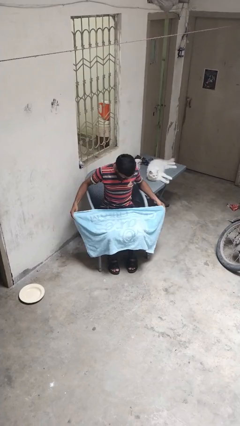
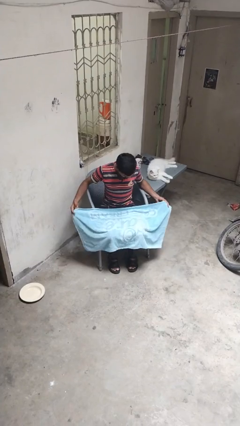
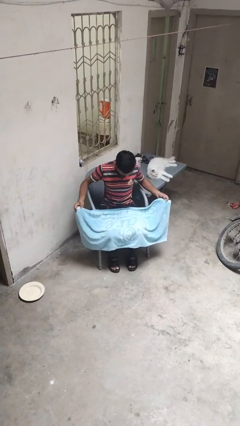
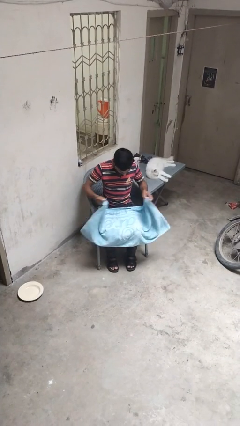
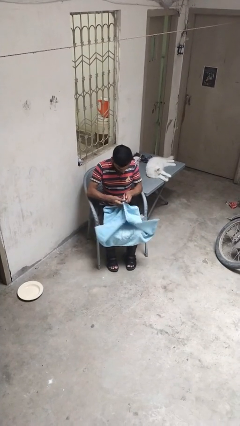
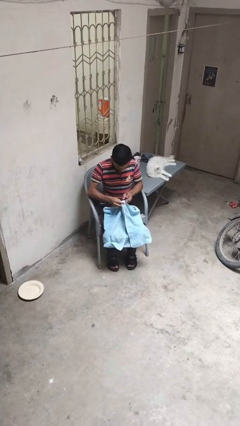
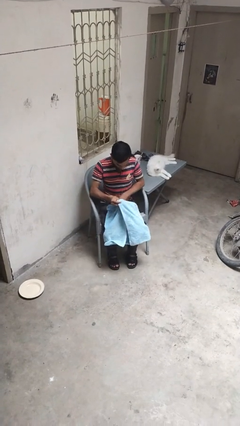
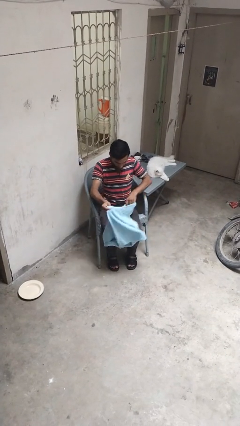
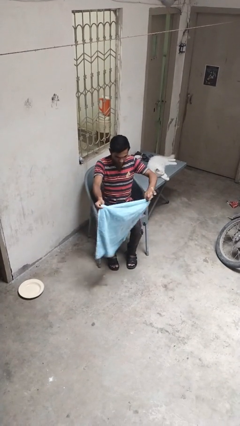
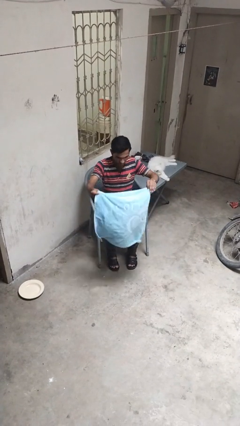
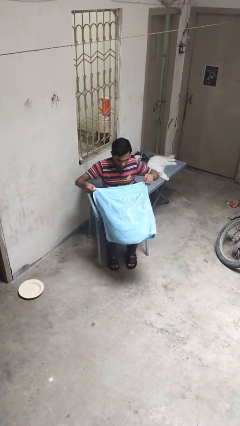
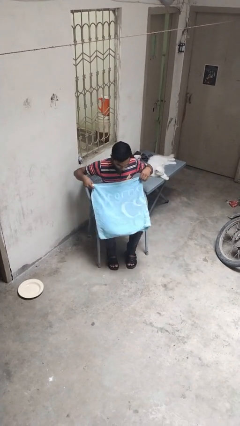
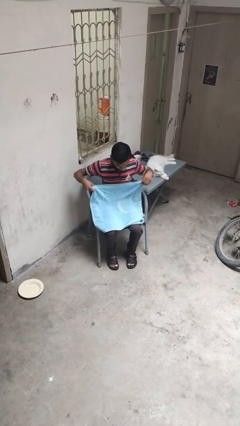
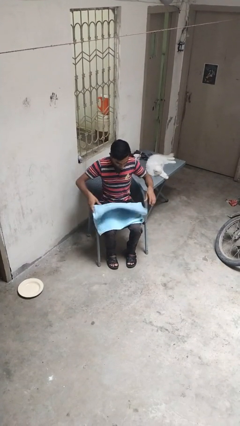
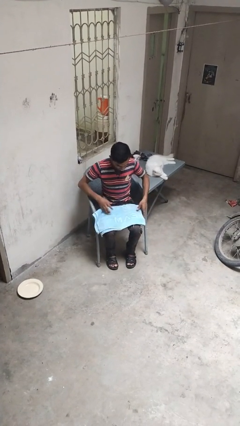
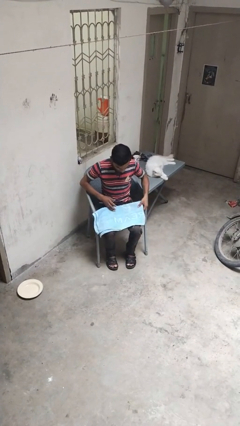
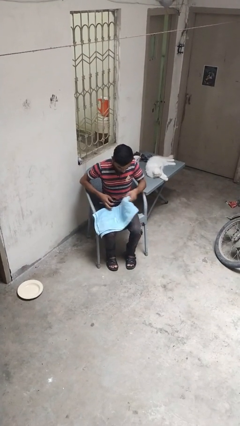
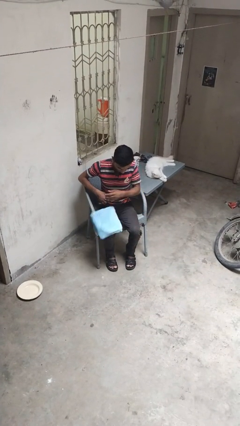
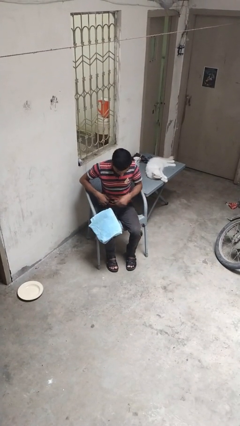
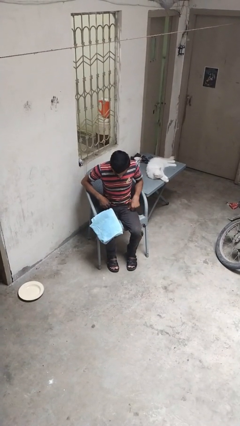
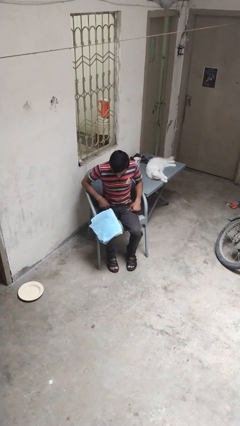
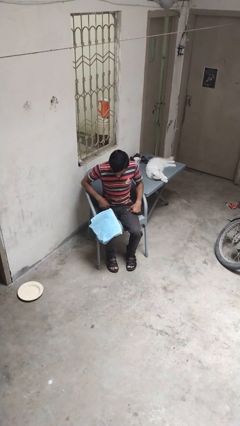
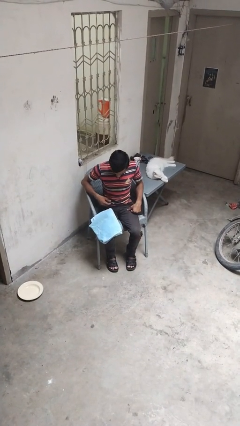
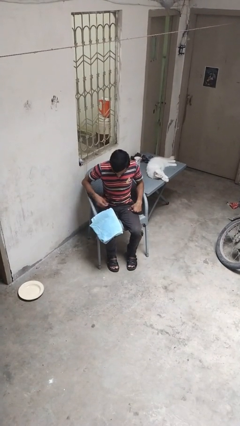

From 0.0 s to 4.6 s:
person folds towel

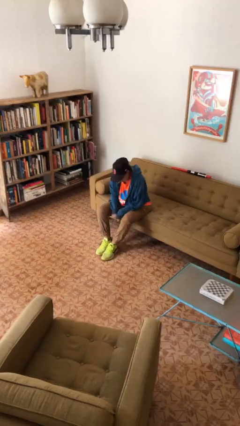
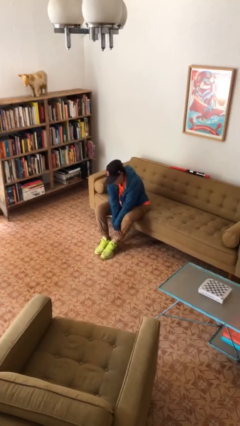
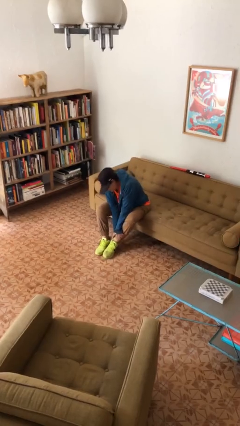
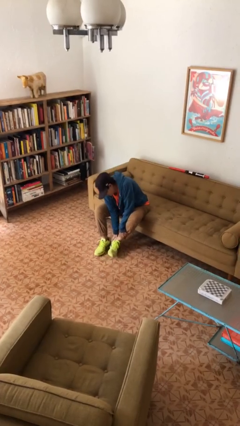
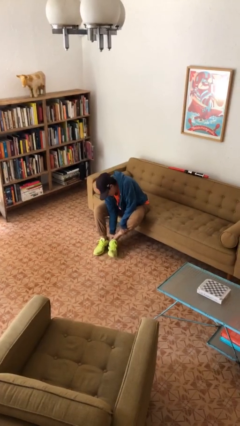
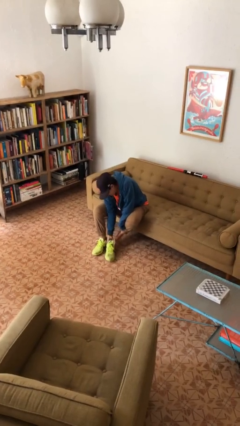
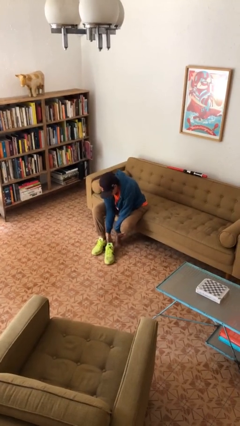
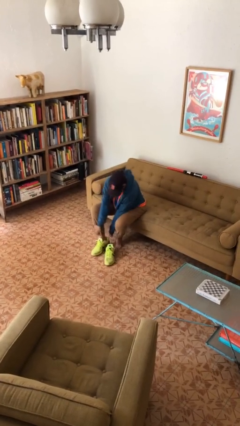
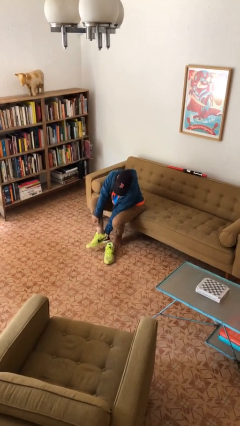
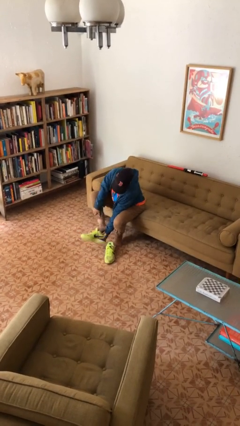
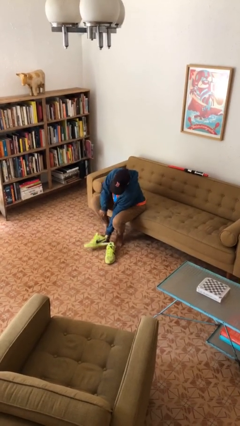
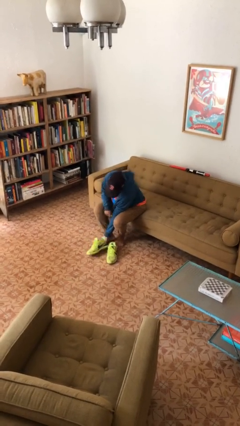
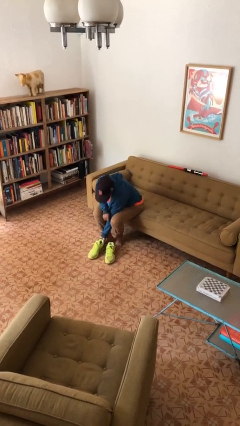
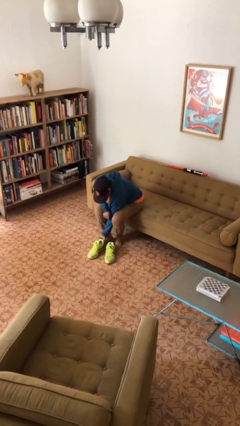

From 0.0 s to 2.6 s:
person takes off shoes

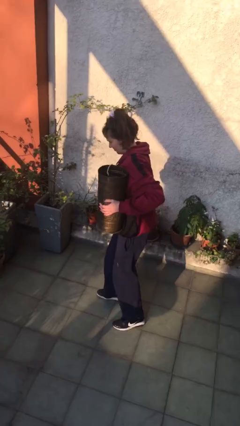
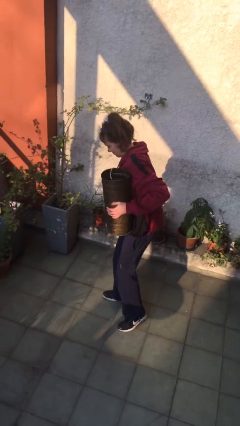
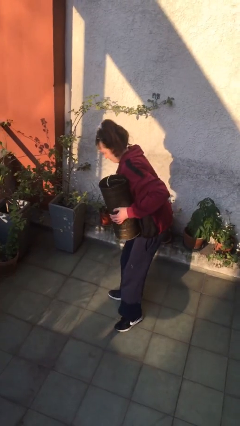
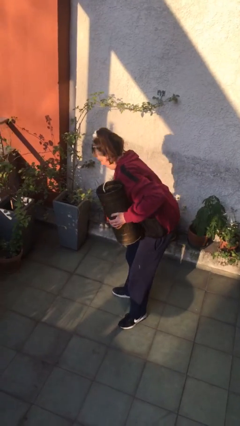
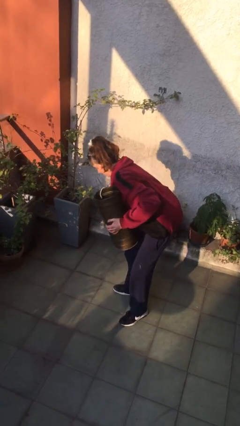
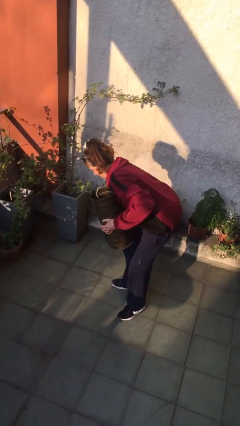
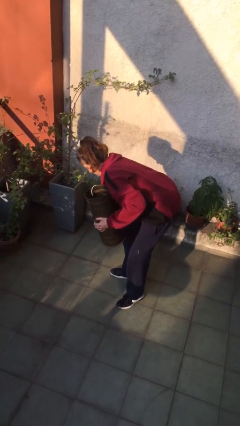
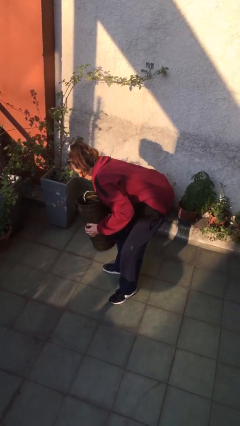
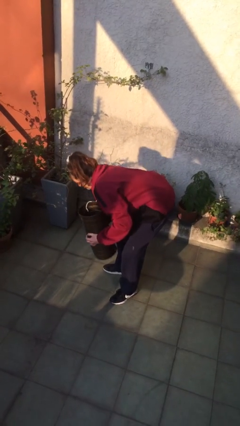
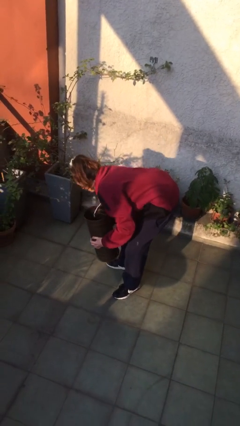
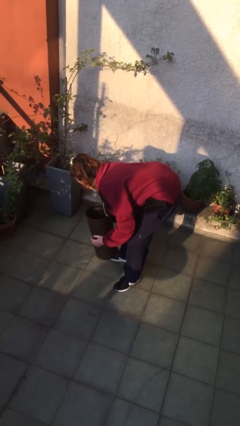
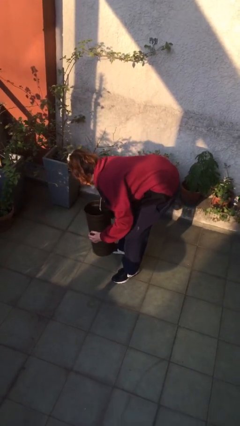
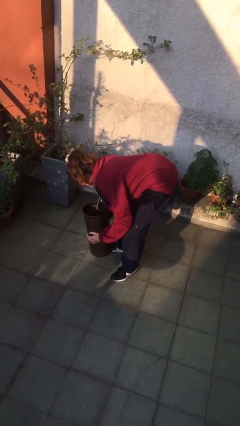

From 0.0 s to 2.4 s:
person puts down object on floor

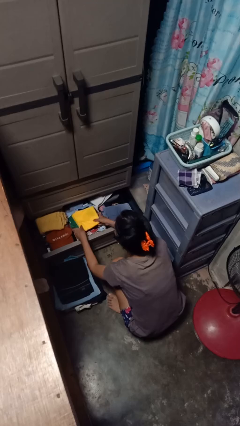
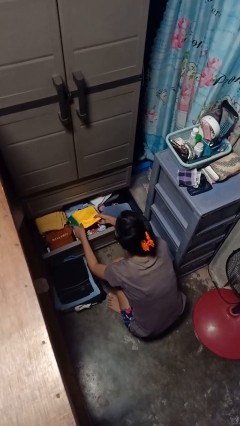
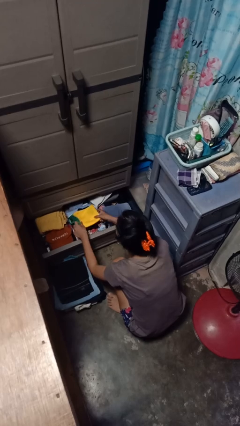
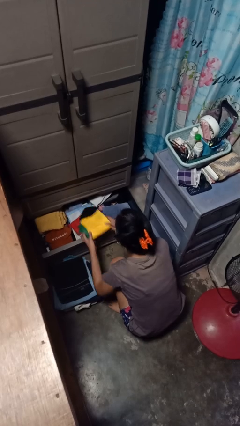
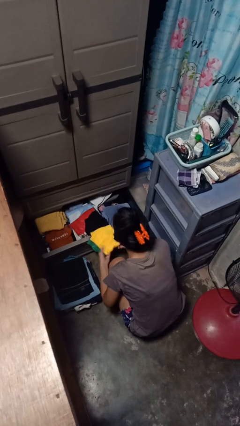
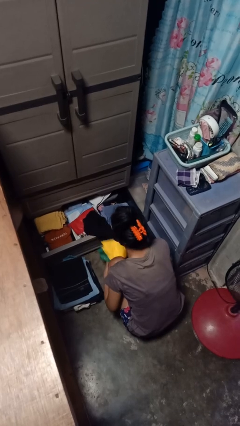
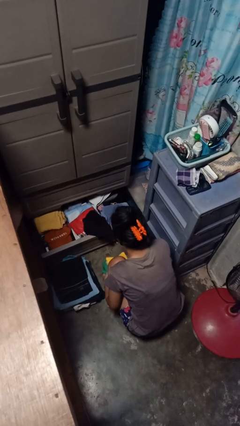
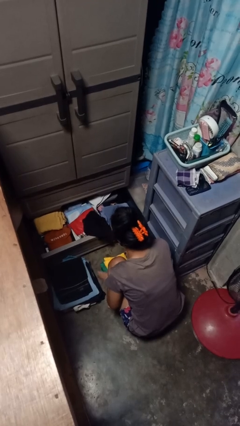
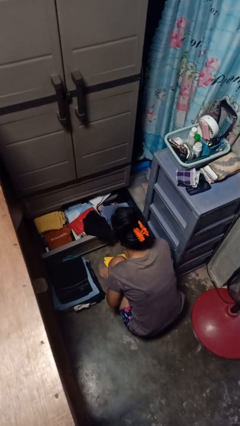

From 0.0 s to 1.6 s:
person takes clothes from dresser

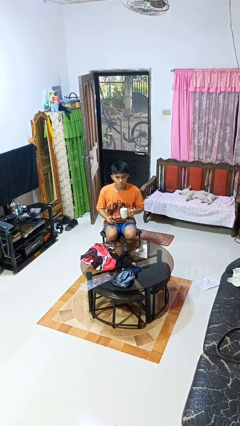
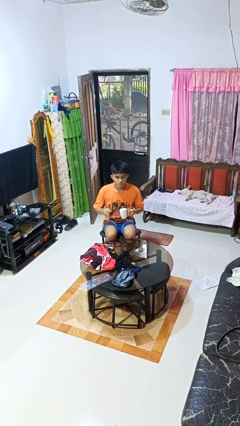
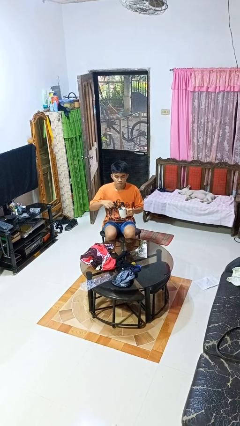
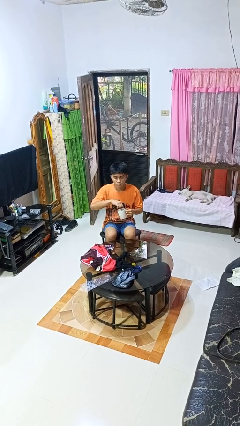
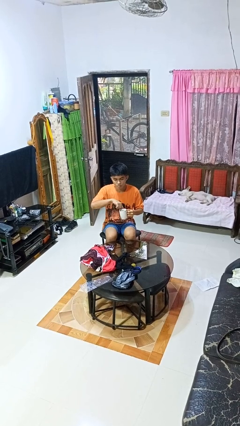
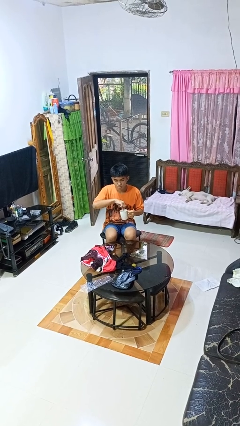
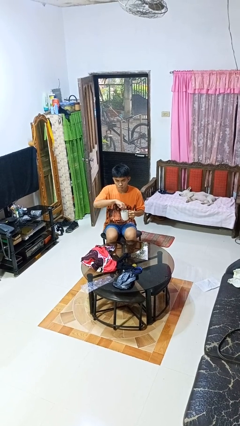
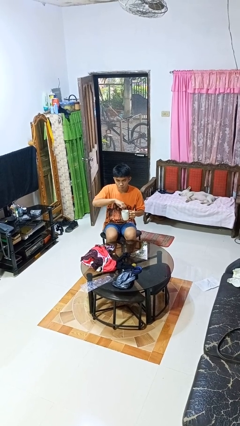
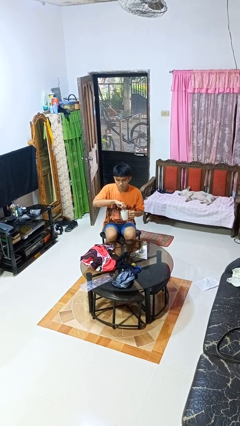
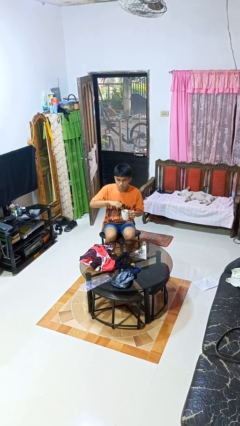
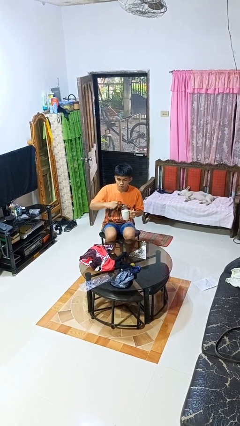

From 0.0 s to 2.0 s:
person stirs mug

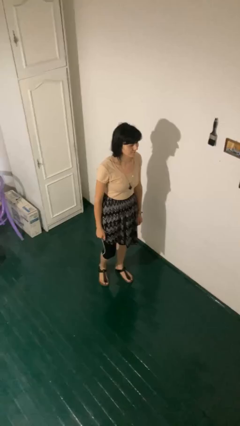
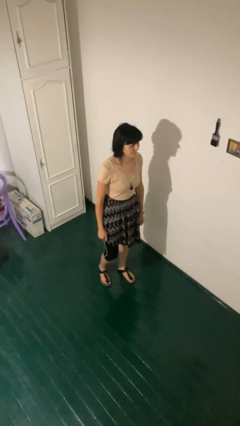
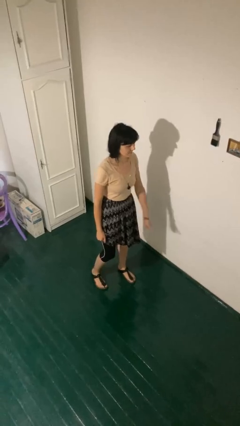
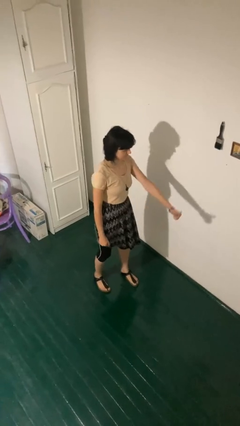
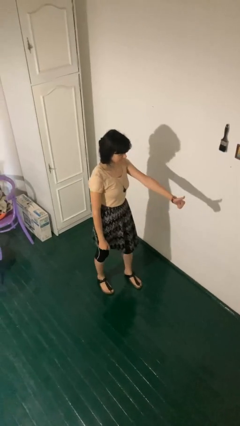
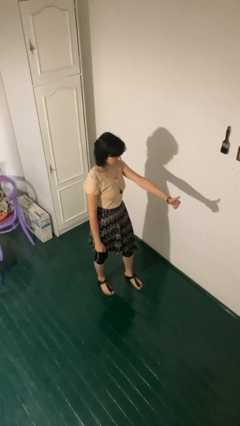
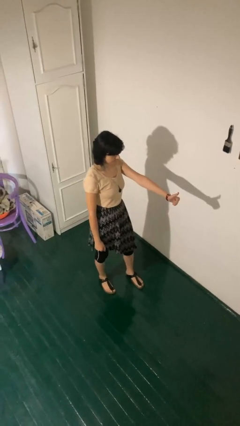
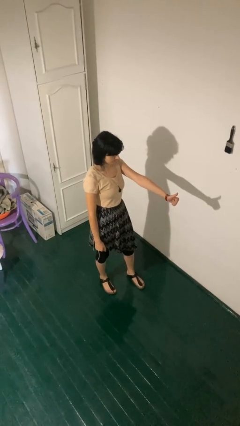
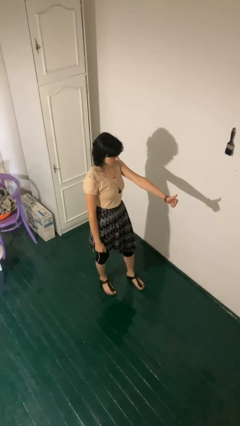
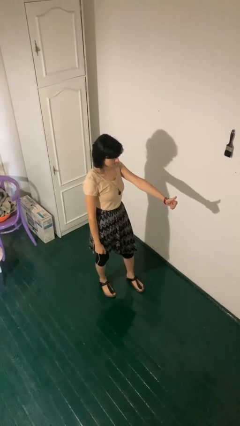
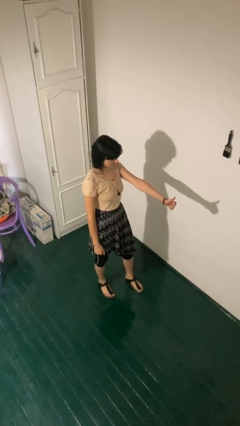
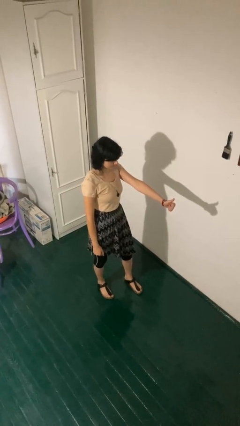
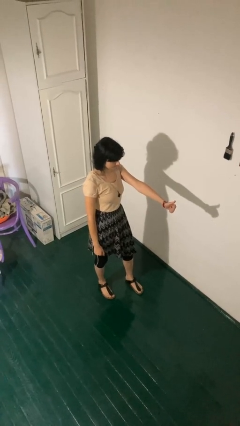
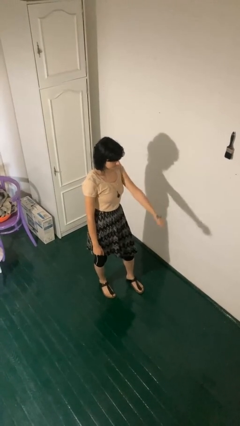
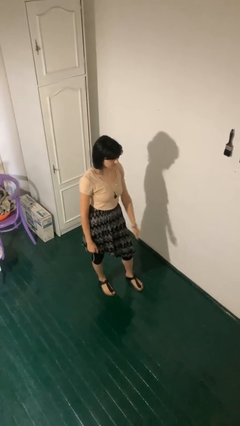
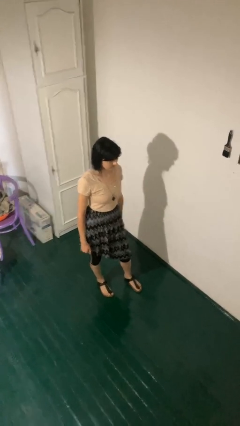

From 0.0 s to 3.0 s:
person gestures thumbs up

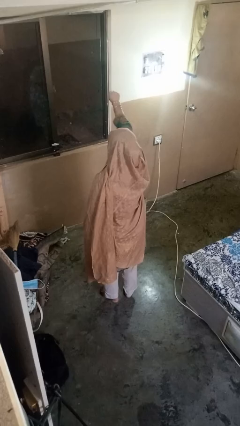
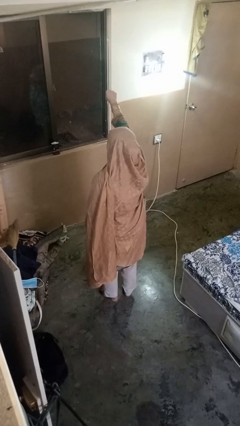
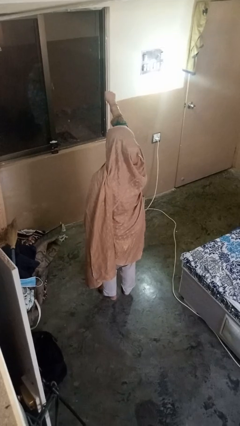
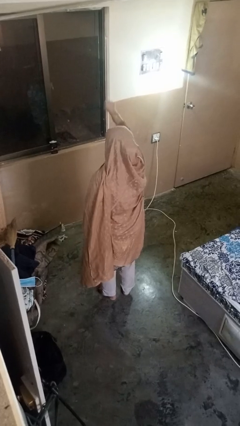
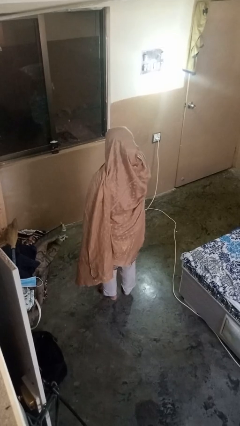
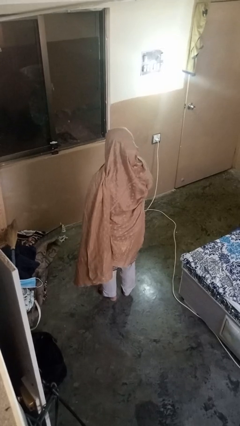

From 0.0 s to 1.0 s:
person punches
